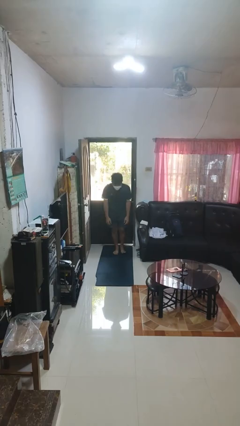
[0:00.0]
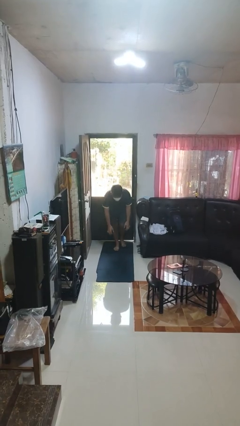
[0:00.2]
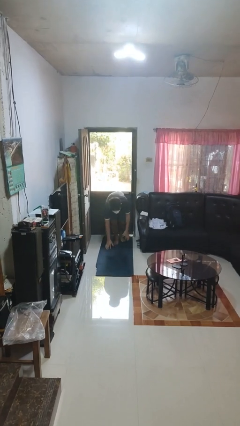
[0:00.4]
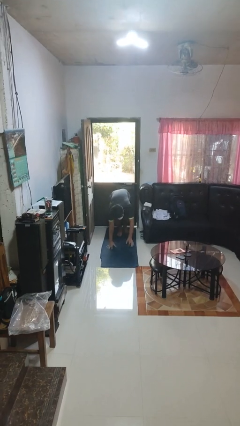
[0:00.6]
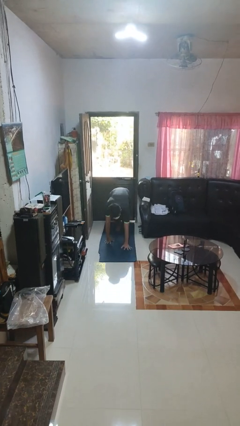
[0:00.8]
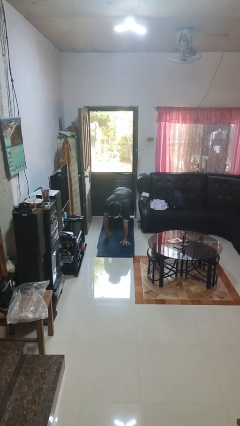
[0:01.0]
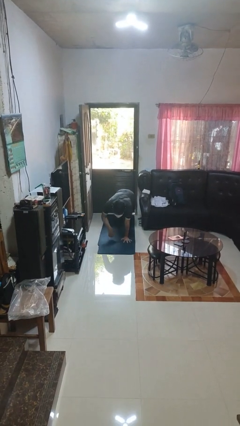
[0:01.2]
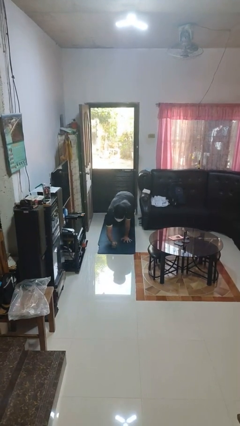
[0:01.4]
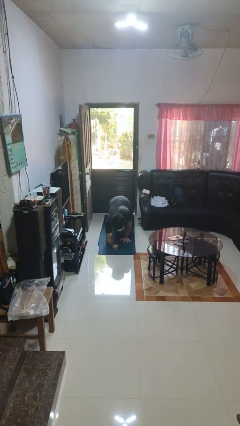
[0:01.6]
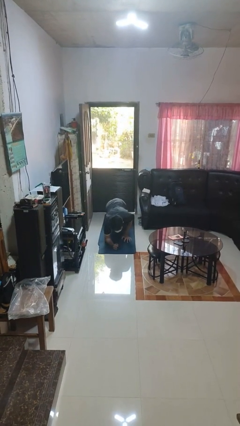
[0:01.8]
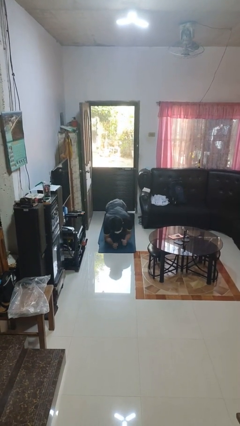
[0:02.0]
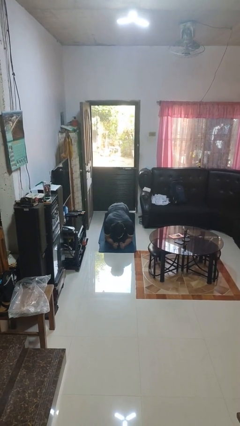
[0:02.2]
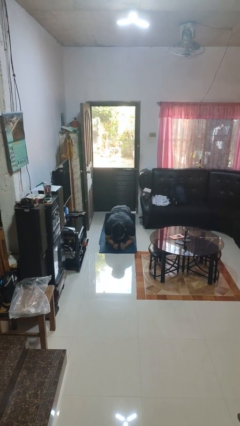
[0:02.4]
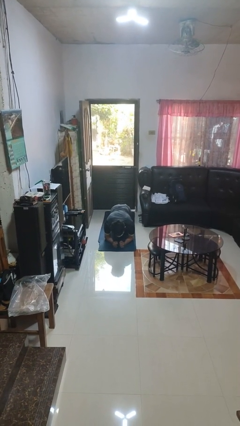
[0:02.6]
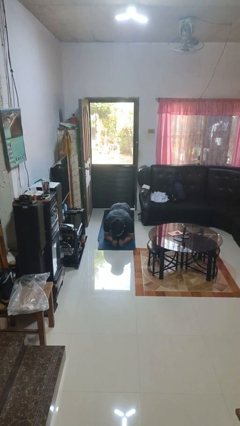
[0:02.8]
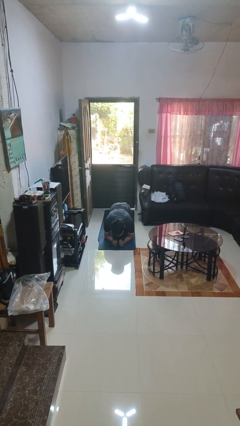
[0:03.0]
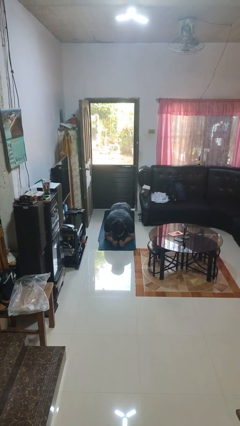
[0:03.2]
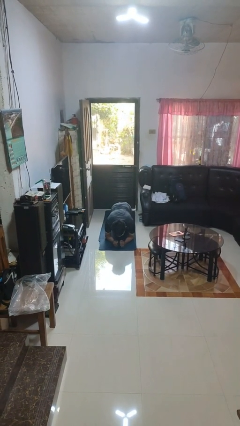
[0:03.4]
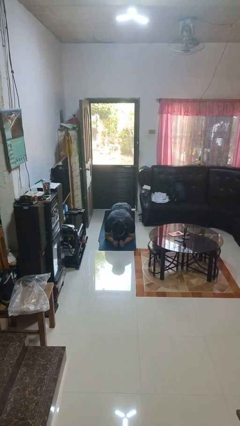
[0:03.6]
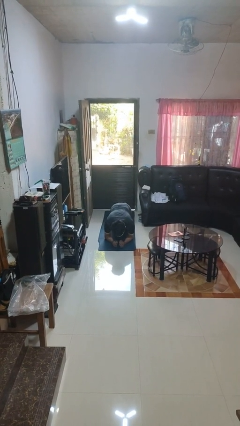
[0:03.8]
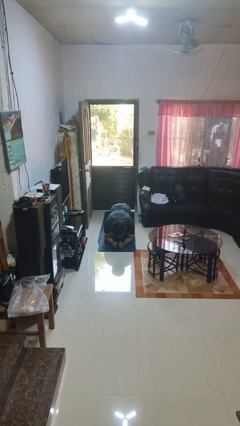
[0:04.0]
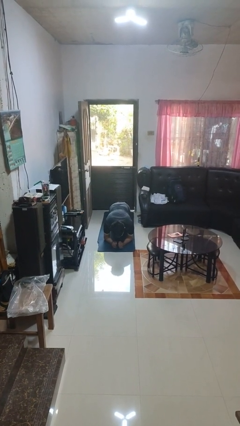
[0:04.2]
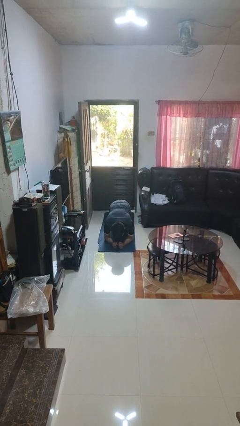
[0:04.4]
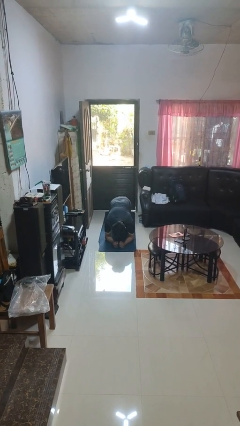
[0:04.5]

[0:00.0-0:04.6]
person exercises with plank

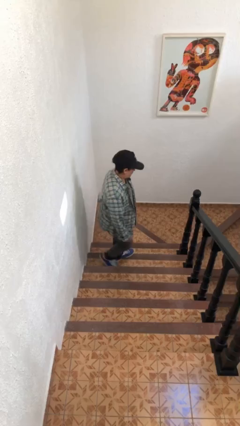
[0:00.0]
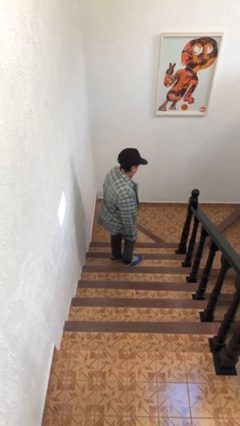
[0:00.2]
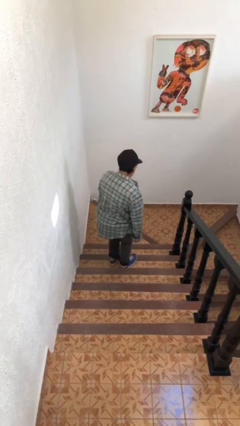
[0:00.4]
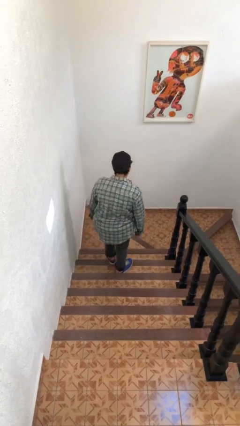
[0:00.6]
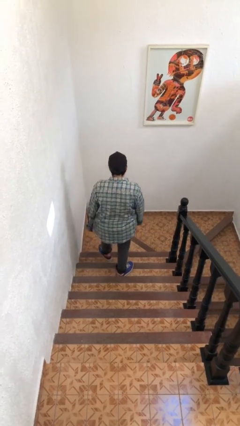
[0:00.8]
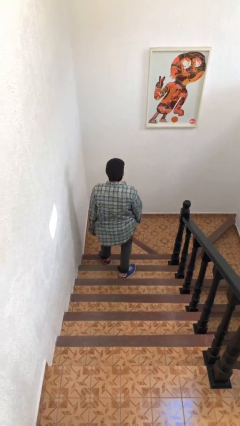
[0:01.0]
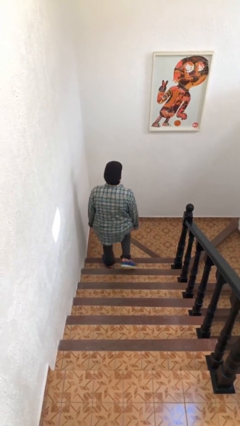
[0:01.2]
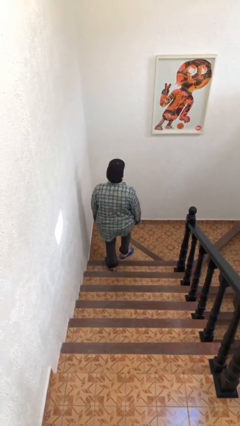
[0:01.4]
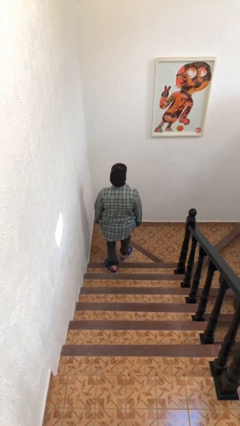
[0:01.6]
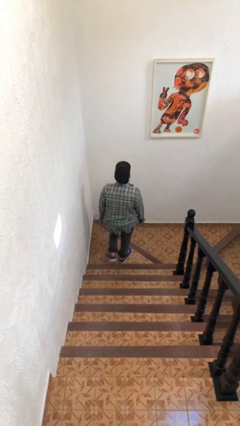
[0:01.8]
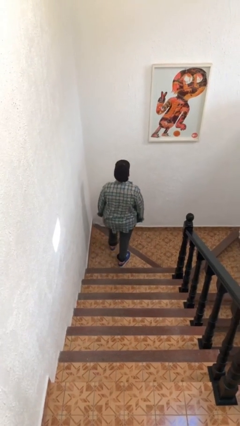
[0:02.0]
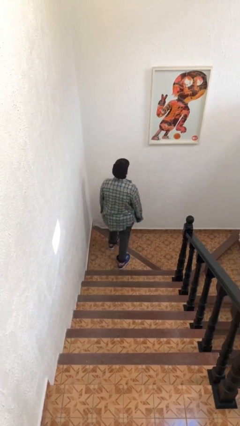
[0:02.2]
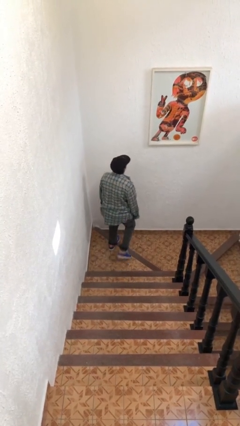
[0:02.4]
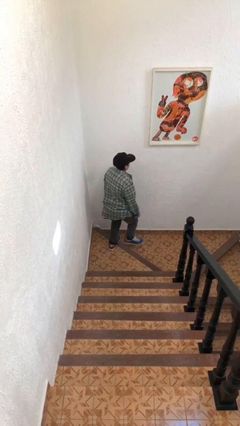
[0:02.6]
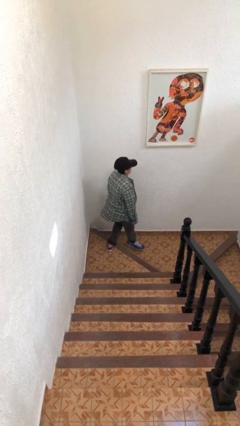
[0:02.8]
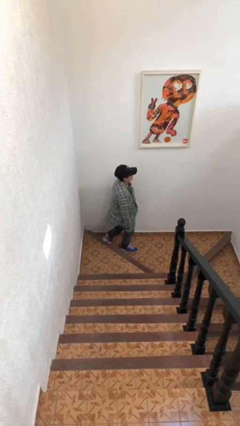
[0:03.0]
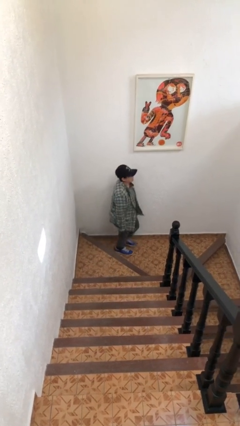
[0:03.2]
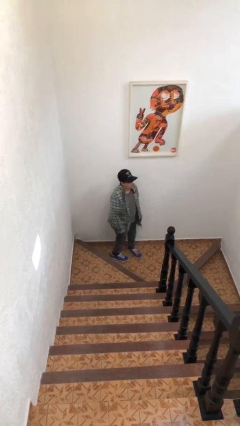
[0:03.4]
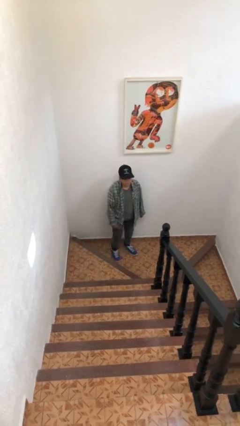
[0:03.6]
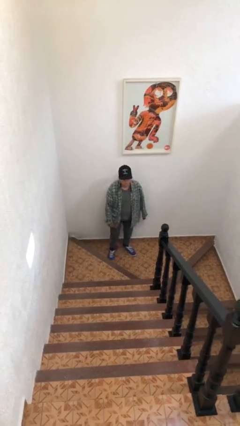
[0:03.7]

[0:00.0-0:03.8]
person climbs down stairs

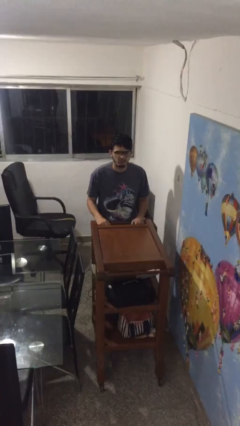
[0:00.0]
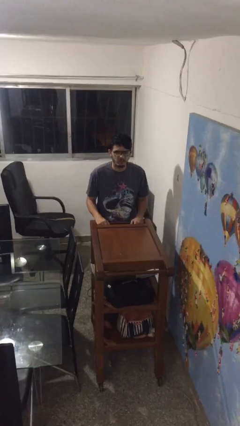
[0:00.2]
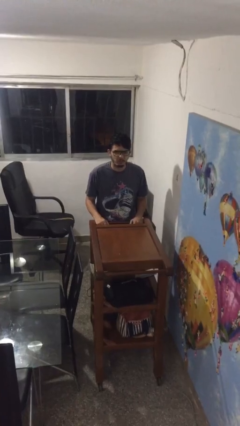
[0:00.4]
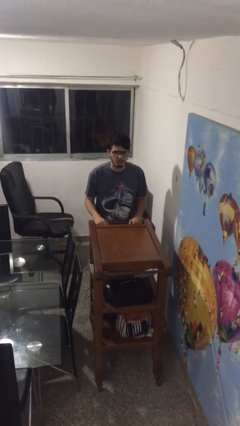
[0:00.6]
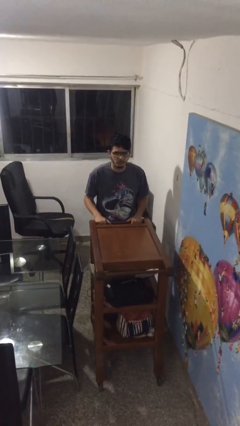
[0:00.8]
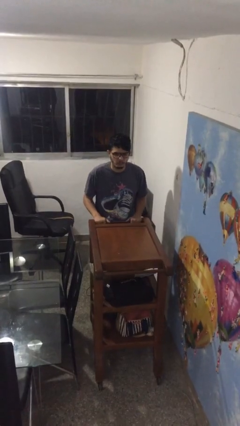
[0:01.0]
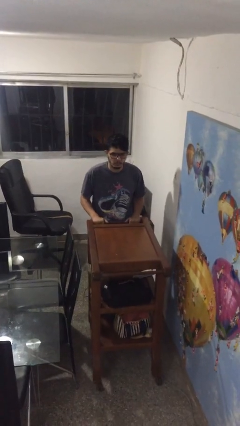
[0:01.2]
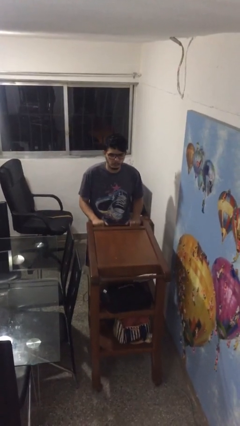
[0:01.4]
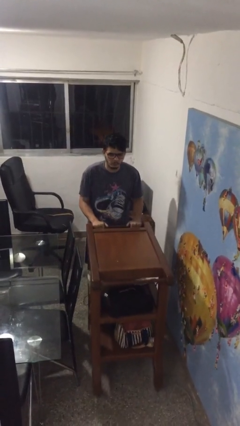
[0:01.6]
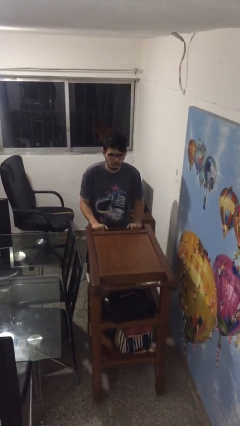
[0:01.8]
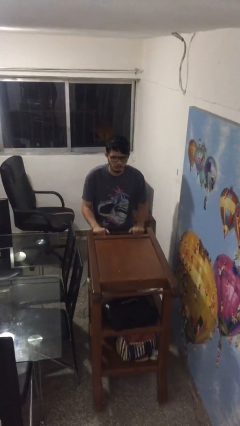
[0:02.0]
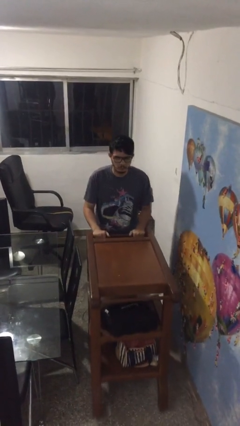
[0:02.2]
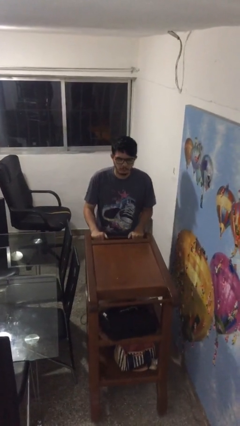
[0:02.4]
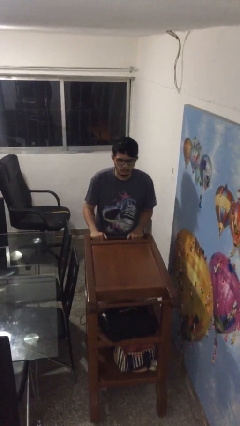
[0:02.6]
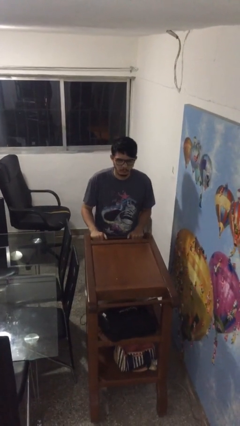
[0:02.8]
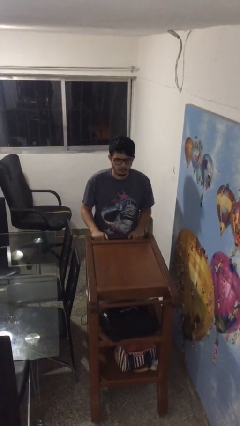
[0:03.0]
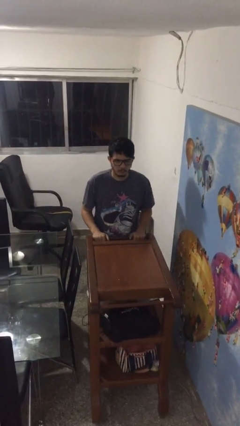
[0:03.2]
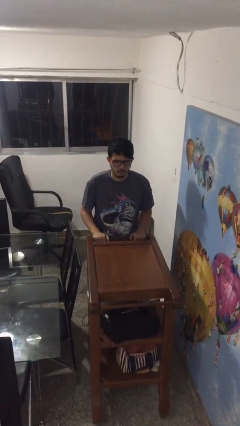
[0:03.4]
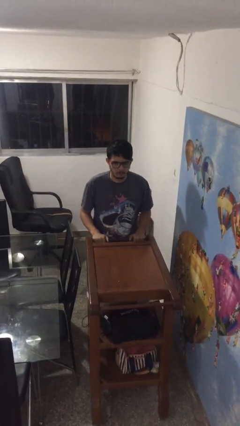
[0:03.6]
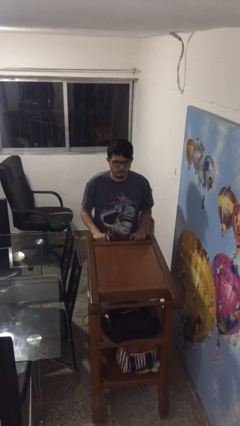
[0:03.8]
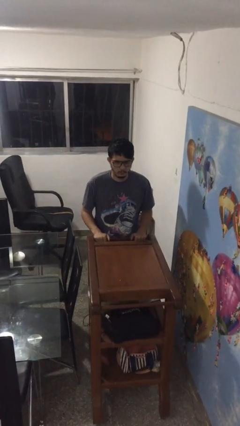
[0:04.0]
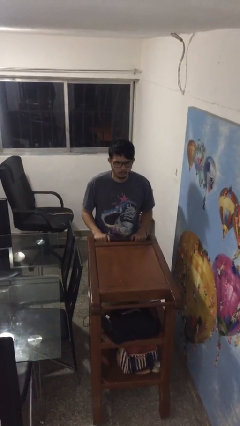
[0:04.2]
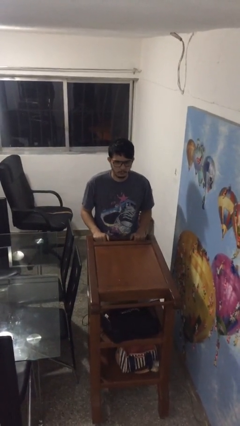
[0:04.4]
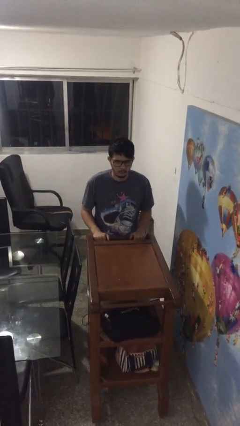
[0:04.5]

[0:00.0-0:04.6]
person pushes wheeled cart

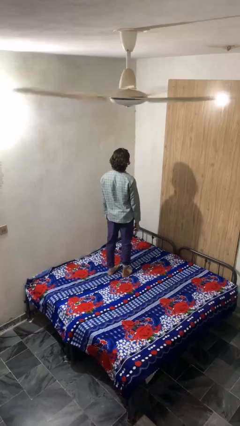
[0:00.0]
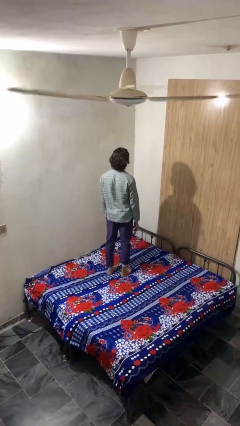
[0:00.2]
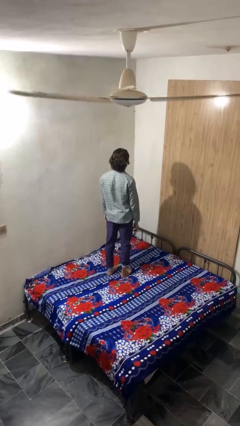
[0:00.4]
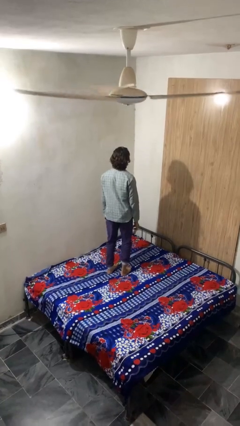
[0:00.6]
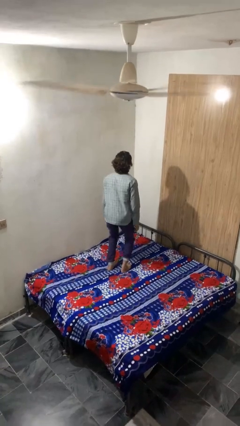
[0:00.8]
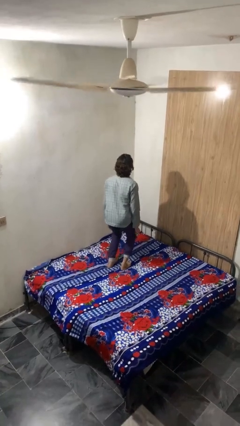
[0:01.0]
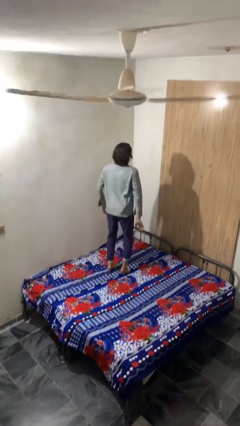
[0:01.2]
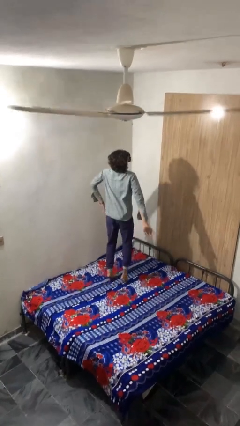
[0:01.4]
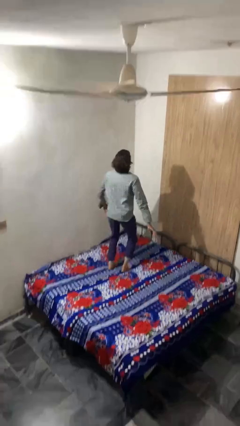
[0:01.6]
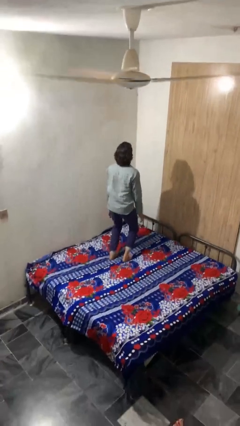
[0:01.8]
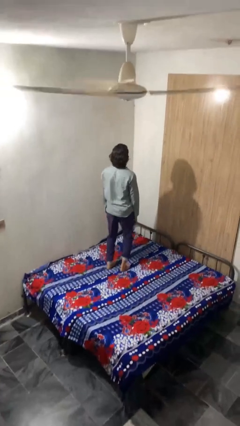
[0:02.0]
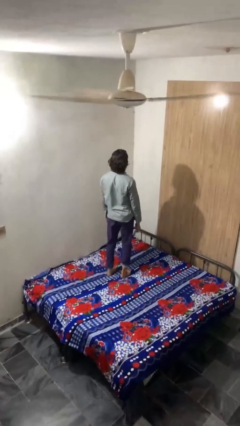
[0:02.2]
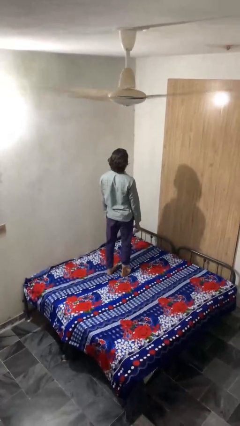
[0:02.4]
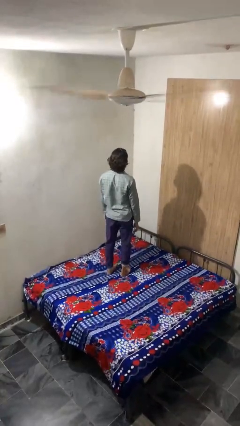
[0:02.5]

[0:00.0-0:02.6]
person jumps on bed

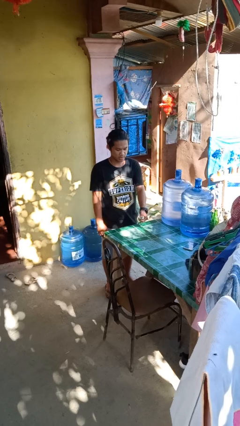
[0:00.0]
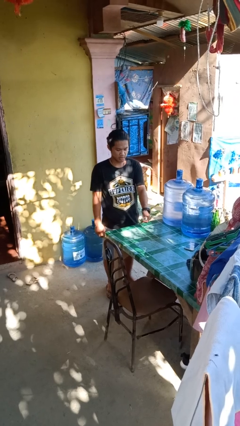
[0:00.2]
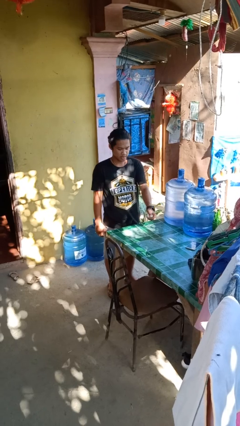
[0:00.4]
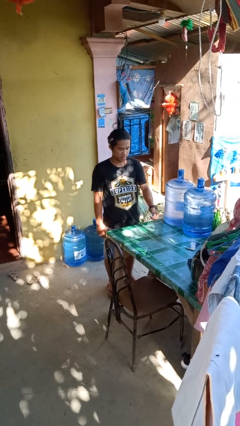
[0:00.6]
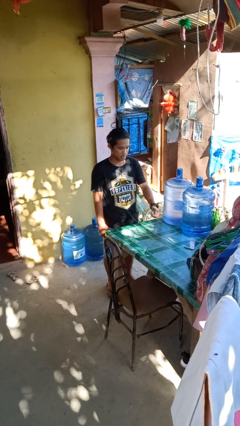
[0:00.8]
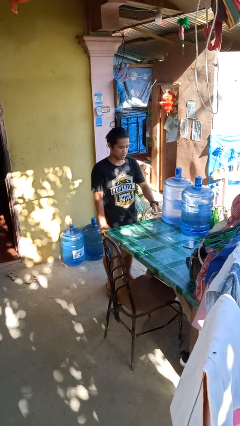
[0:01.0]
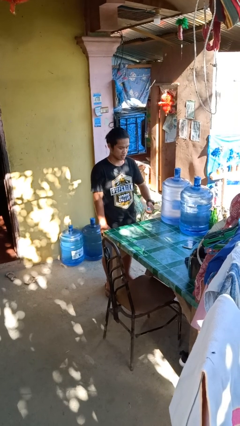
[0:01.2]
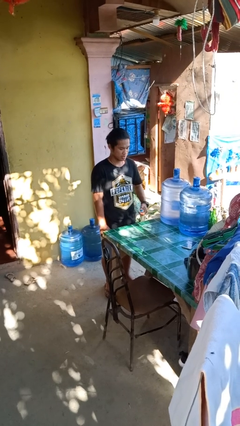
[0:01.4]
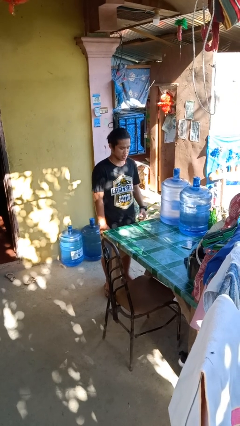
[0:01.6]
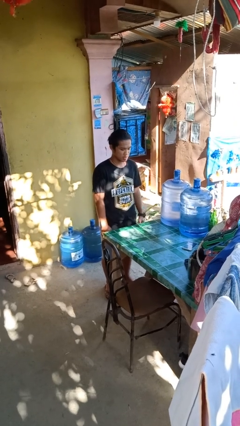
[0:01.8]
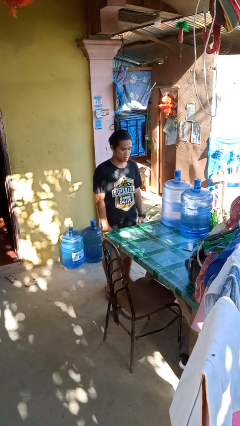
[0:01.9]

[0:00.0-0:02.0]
person sprays from bottle

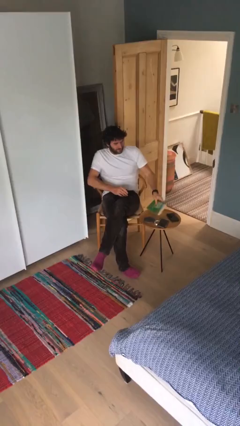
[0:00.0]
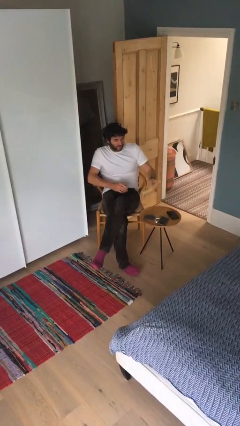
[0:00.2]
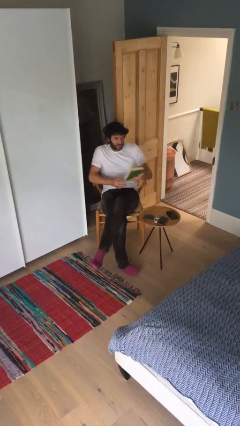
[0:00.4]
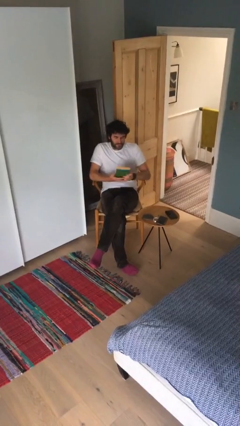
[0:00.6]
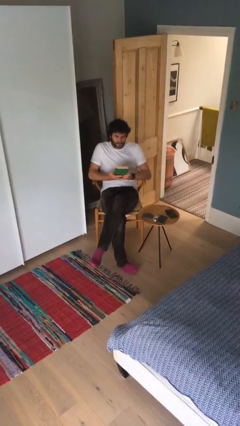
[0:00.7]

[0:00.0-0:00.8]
person picks up object from table
